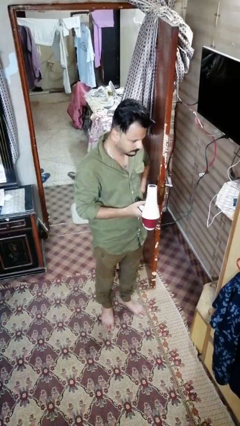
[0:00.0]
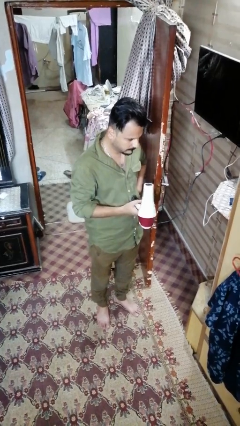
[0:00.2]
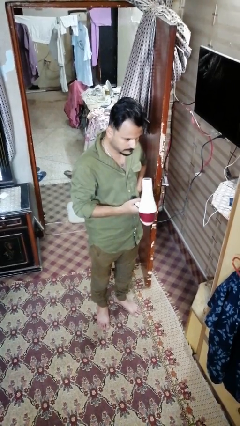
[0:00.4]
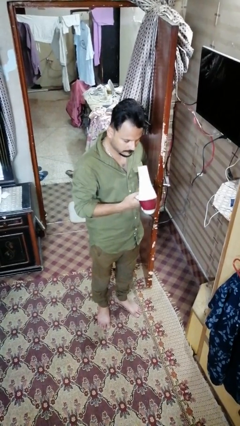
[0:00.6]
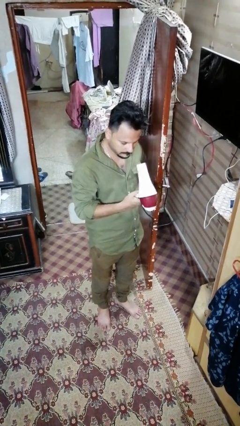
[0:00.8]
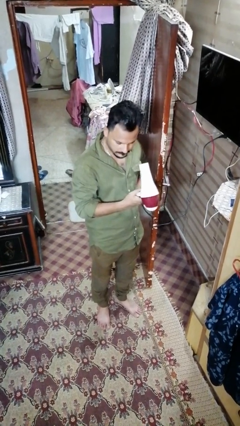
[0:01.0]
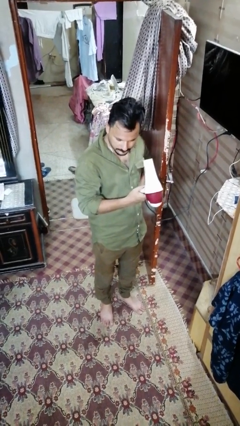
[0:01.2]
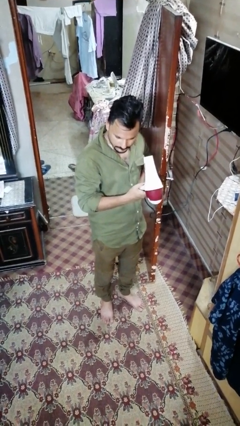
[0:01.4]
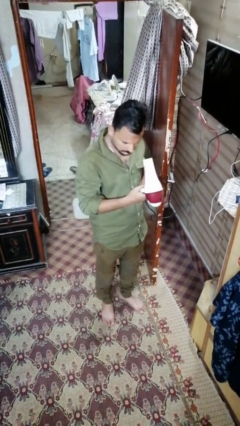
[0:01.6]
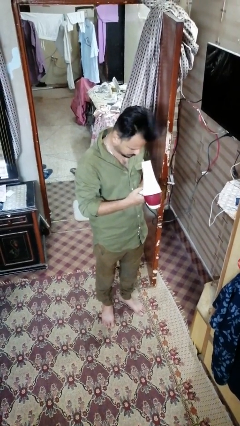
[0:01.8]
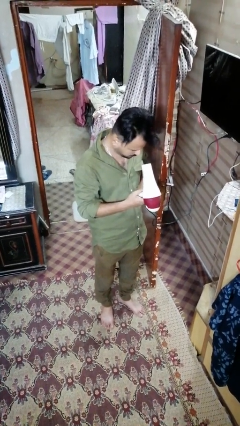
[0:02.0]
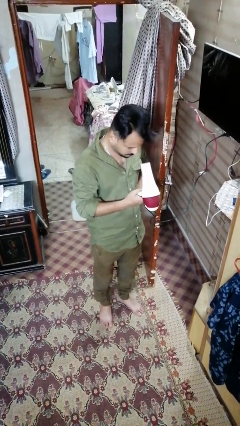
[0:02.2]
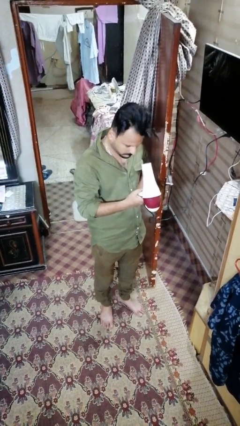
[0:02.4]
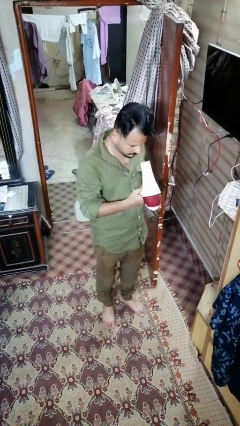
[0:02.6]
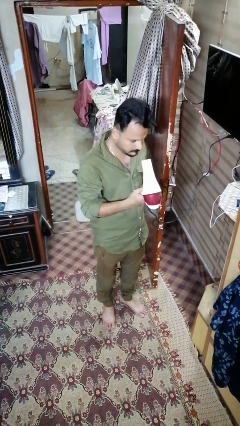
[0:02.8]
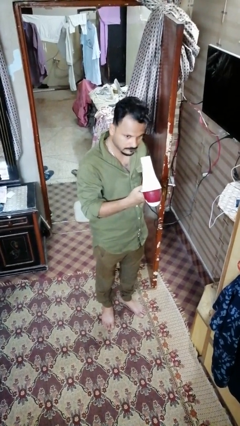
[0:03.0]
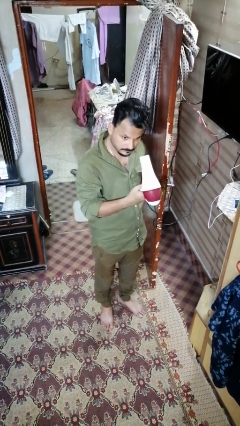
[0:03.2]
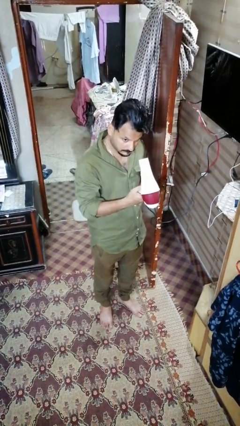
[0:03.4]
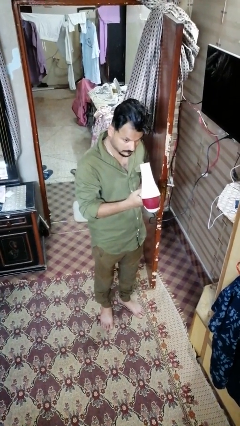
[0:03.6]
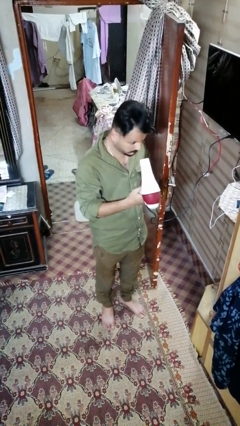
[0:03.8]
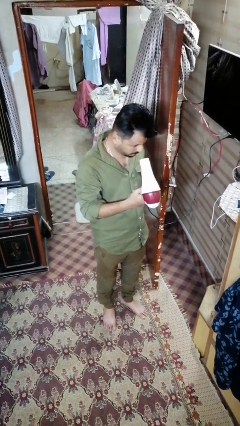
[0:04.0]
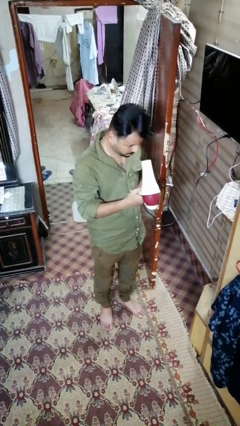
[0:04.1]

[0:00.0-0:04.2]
person dries hair with hairdryer

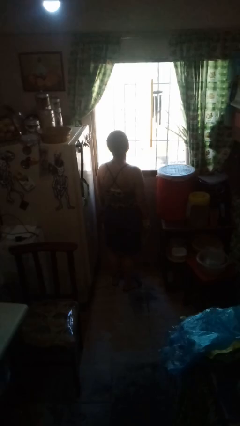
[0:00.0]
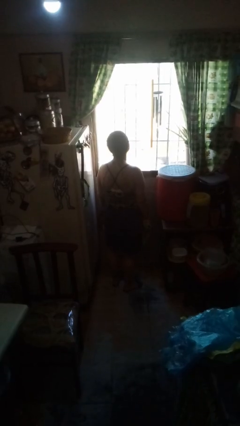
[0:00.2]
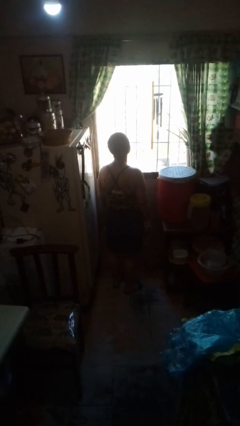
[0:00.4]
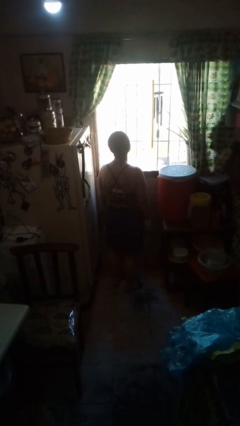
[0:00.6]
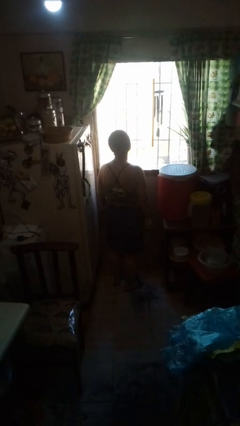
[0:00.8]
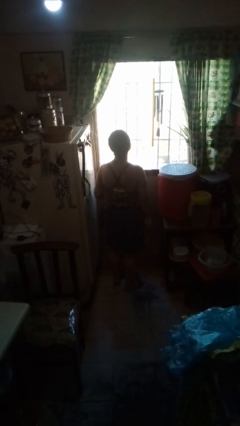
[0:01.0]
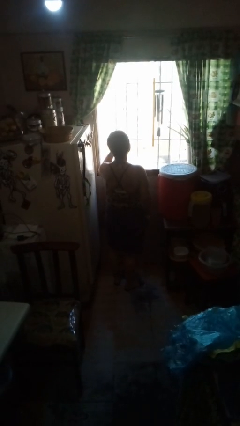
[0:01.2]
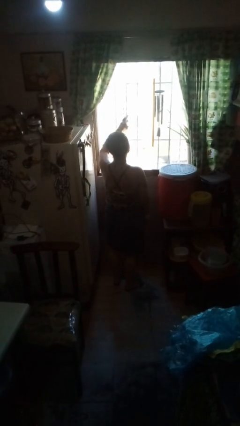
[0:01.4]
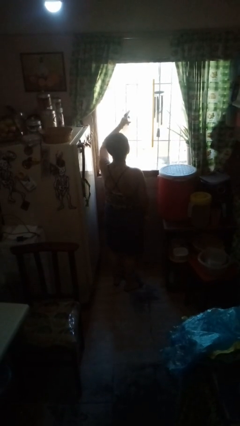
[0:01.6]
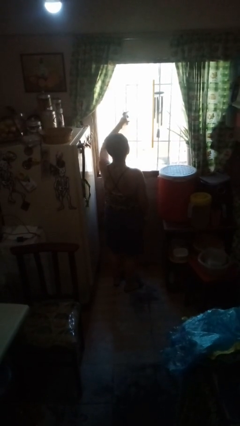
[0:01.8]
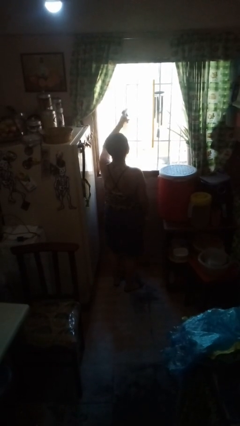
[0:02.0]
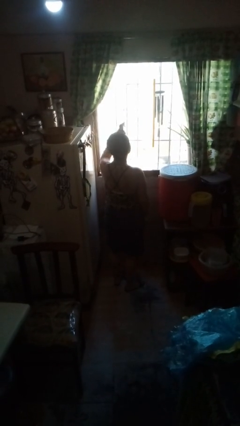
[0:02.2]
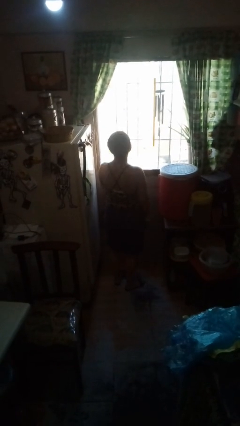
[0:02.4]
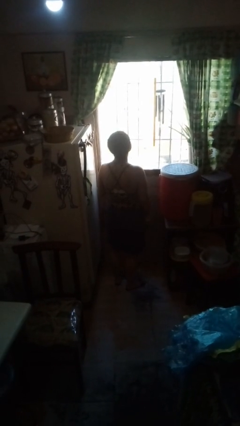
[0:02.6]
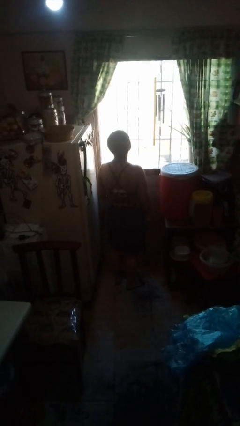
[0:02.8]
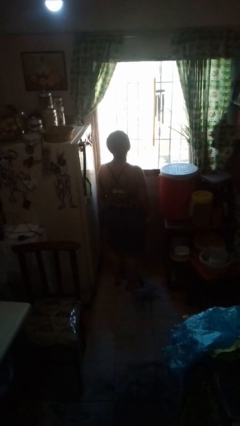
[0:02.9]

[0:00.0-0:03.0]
person sprays from bottle

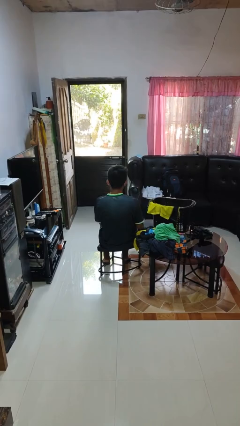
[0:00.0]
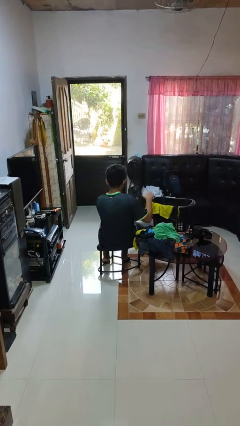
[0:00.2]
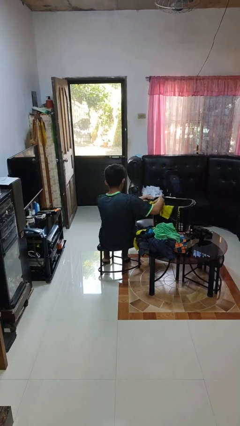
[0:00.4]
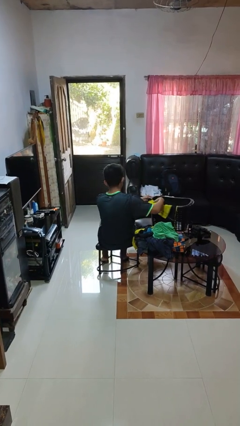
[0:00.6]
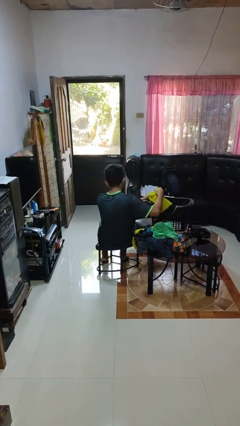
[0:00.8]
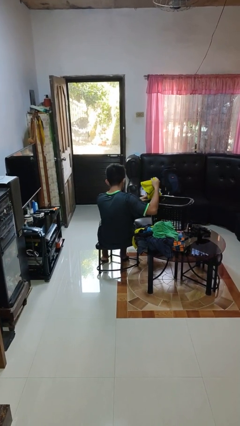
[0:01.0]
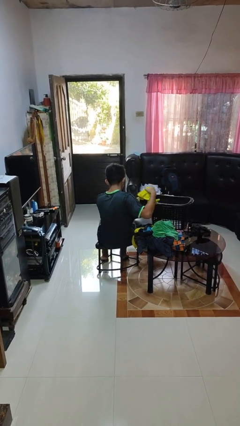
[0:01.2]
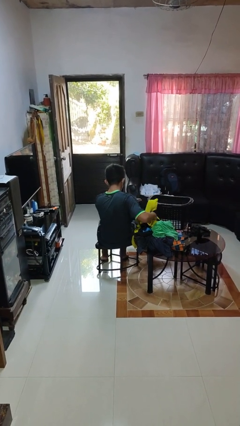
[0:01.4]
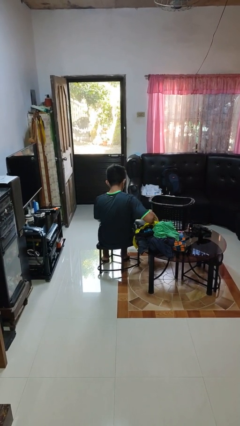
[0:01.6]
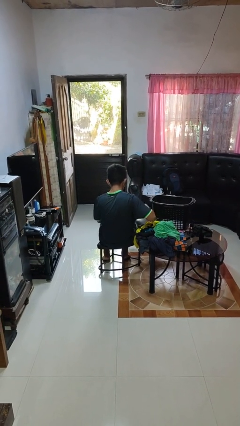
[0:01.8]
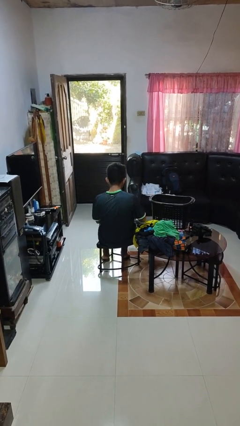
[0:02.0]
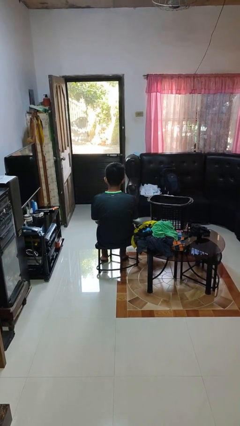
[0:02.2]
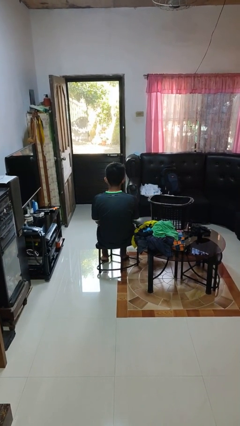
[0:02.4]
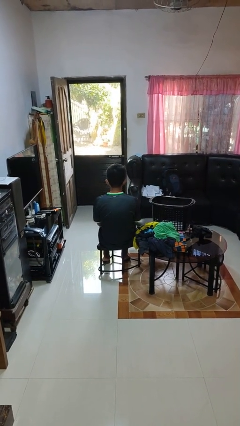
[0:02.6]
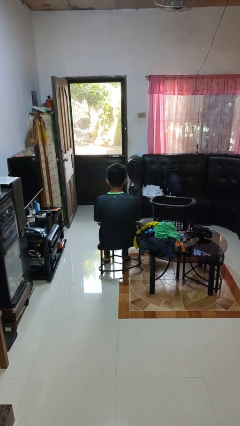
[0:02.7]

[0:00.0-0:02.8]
person takes object from basket

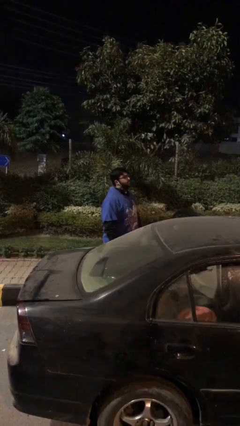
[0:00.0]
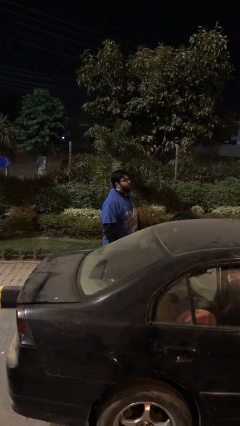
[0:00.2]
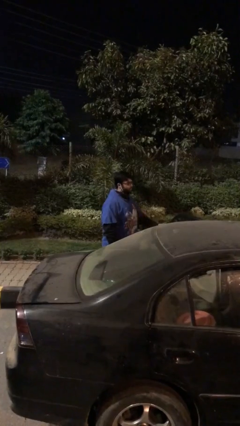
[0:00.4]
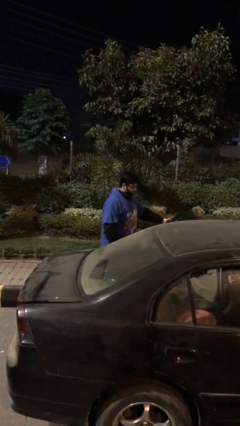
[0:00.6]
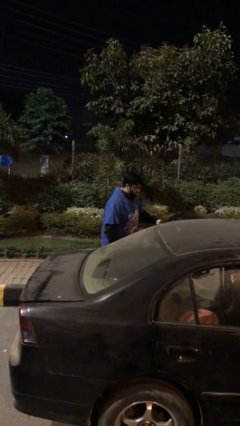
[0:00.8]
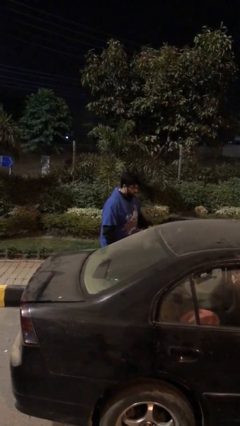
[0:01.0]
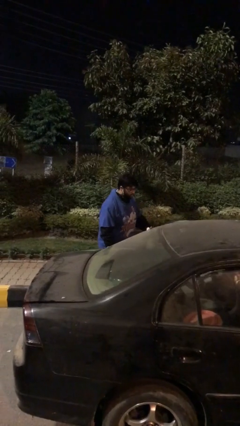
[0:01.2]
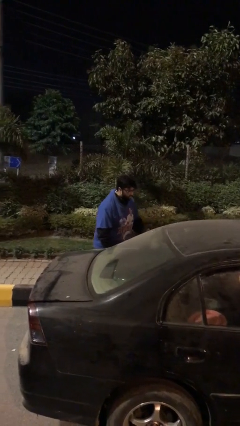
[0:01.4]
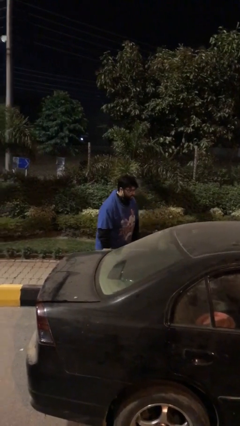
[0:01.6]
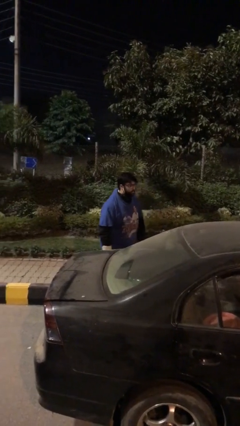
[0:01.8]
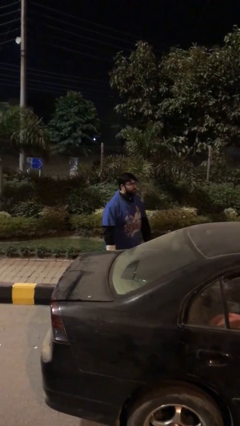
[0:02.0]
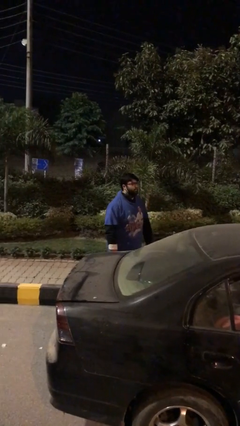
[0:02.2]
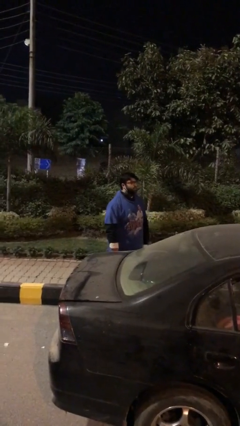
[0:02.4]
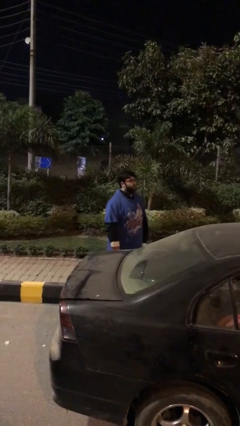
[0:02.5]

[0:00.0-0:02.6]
person closes car door

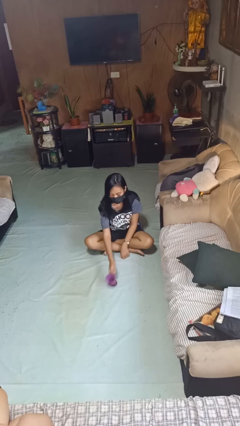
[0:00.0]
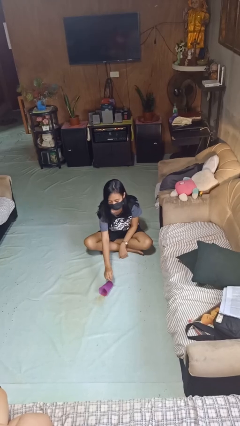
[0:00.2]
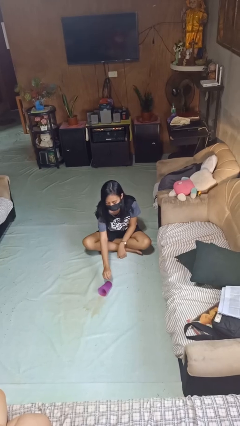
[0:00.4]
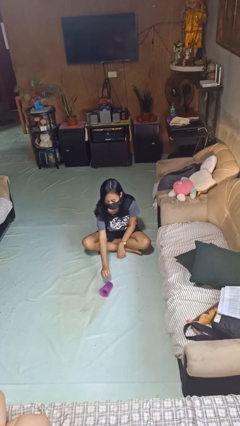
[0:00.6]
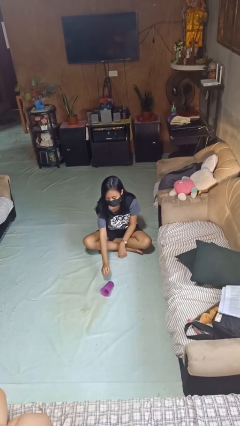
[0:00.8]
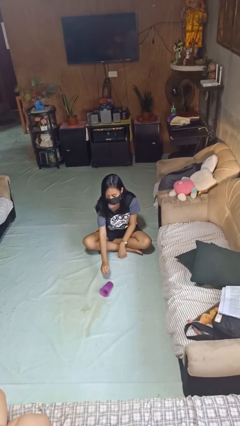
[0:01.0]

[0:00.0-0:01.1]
person spills on floor

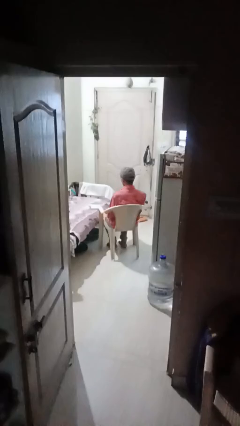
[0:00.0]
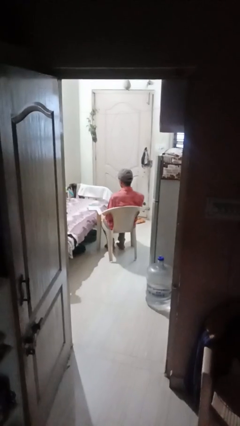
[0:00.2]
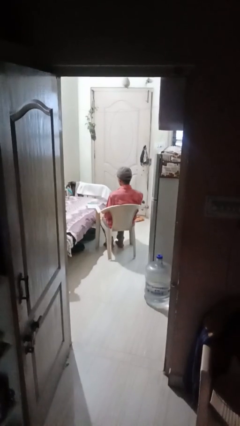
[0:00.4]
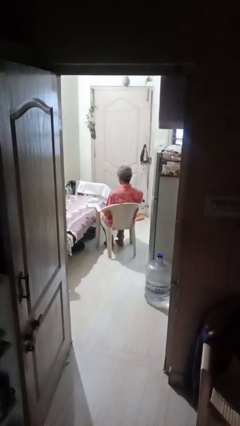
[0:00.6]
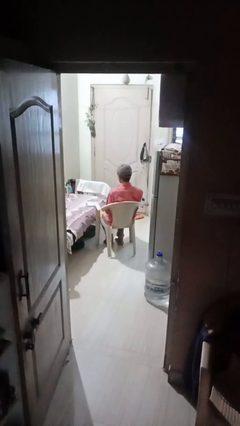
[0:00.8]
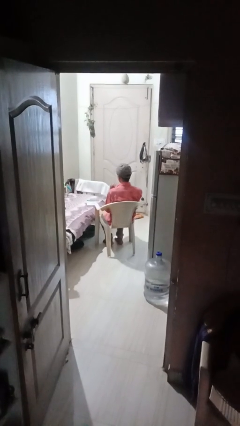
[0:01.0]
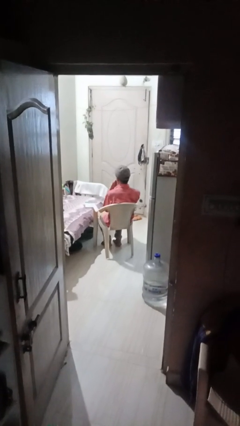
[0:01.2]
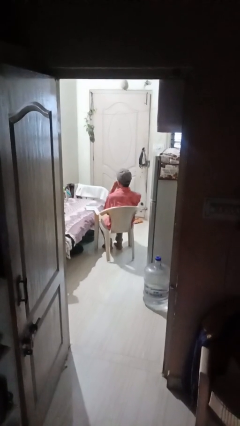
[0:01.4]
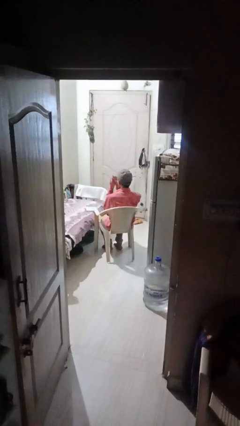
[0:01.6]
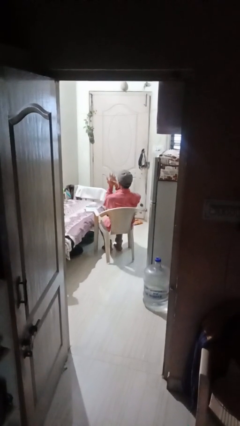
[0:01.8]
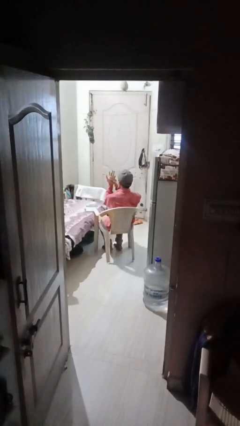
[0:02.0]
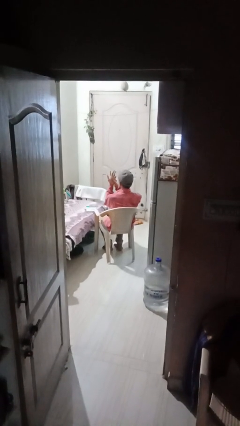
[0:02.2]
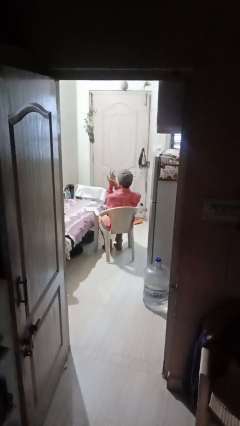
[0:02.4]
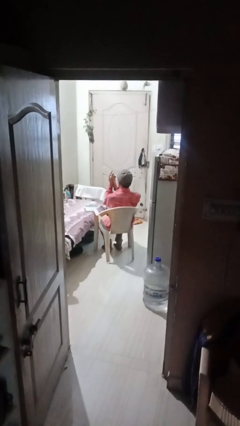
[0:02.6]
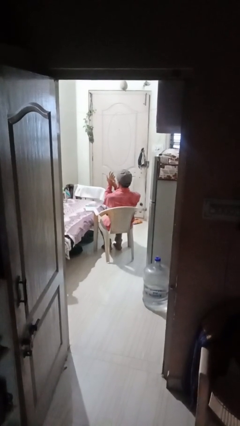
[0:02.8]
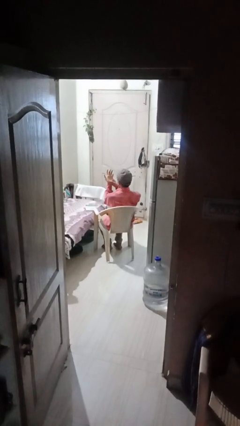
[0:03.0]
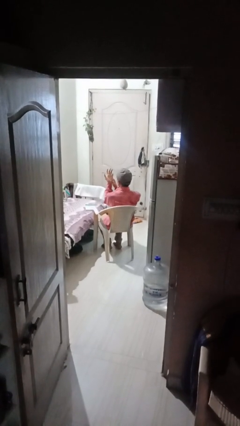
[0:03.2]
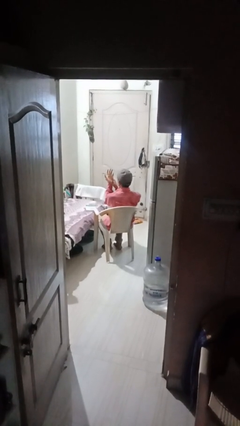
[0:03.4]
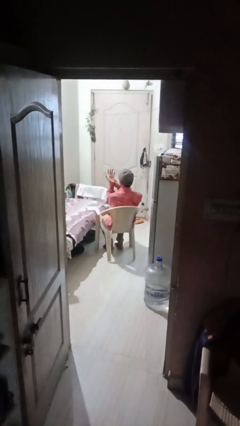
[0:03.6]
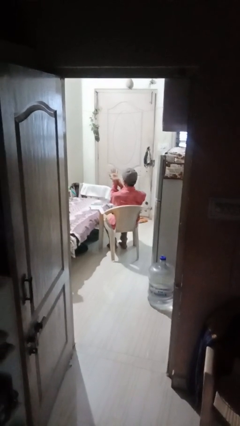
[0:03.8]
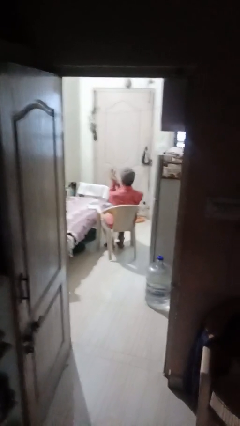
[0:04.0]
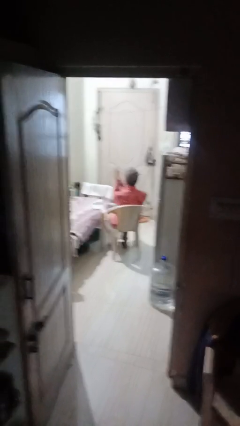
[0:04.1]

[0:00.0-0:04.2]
person looks at hands in lap
